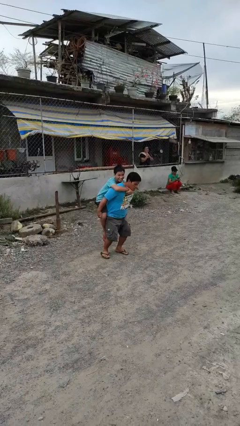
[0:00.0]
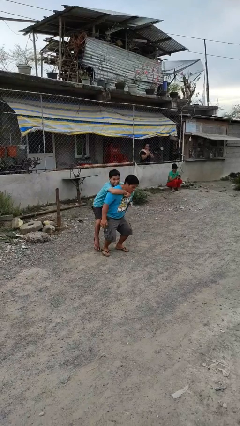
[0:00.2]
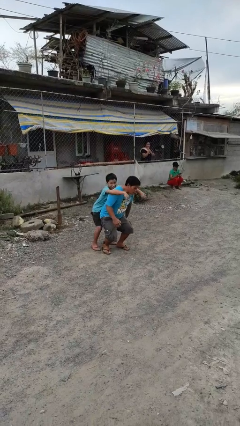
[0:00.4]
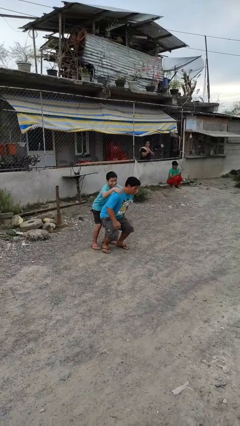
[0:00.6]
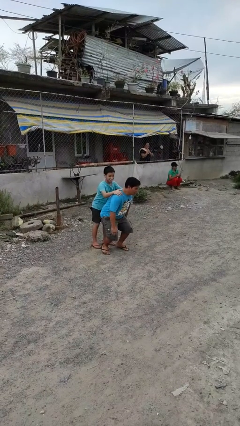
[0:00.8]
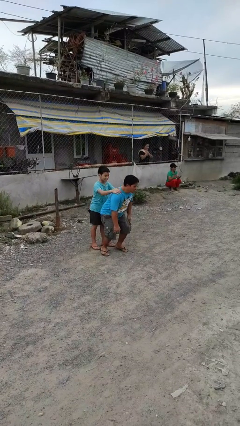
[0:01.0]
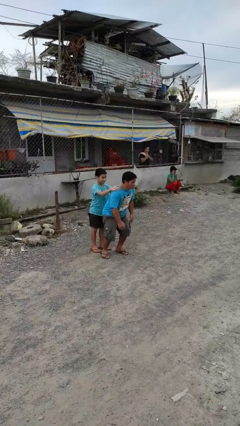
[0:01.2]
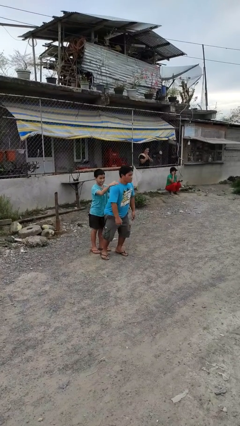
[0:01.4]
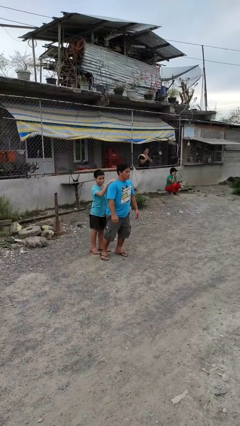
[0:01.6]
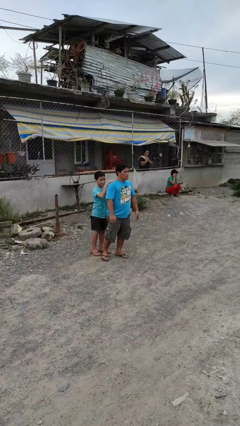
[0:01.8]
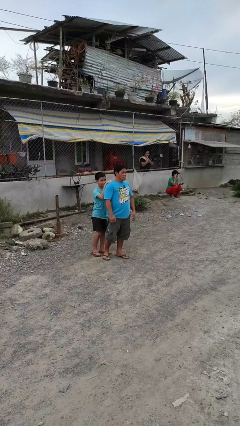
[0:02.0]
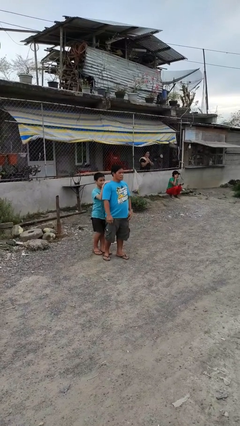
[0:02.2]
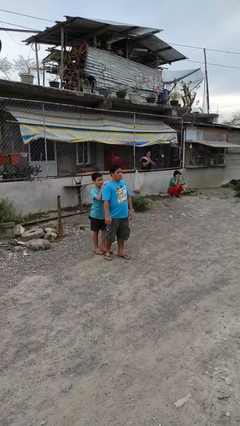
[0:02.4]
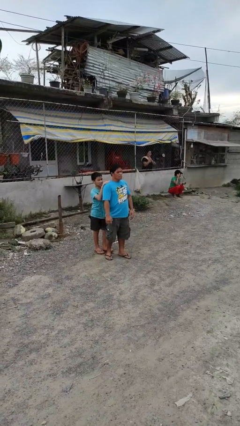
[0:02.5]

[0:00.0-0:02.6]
person puts down person

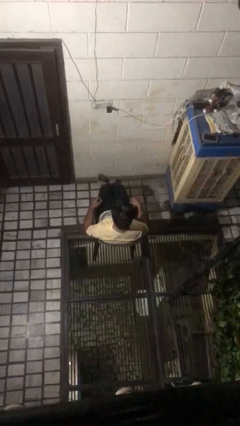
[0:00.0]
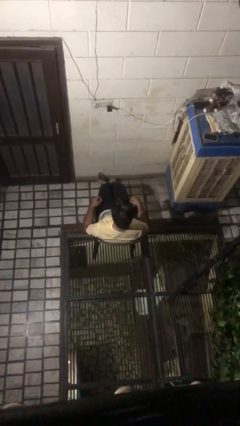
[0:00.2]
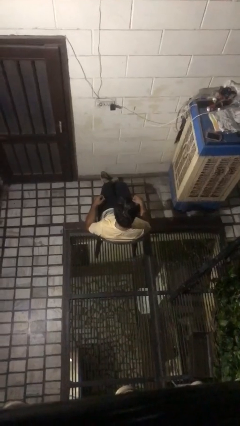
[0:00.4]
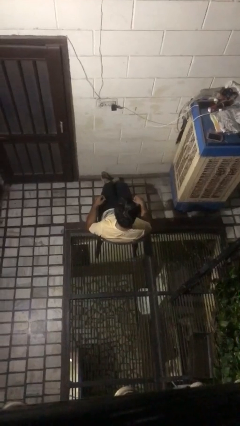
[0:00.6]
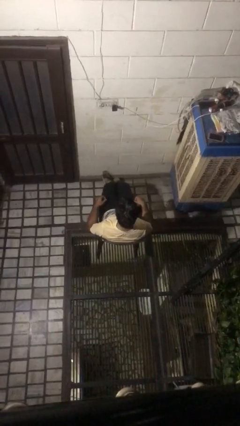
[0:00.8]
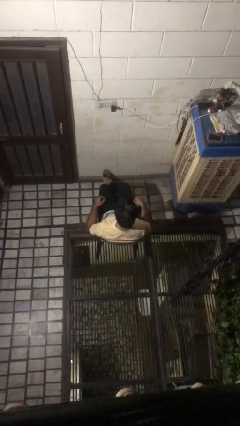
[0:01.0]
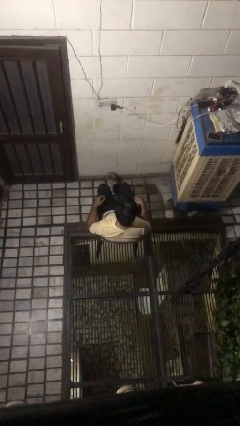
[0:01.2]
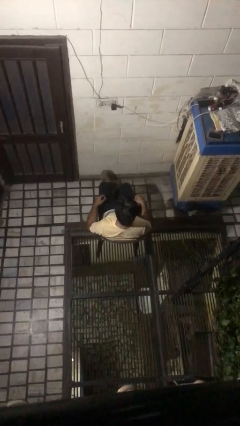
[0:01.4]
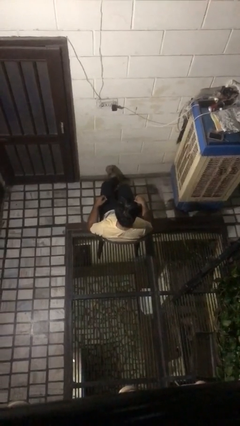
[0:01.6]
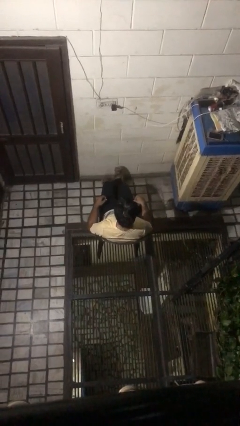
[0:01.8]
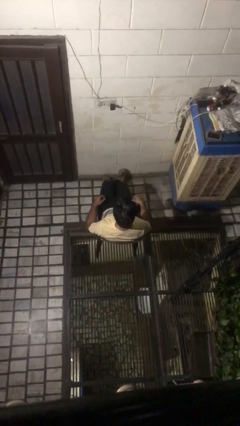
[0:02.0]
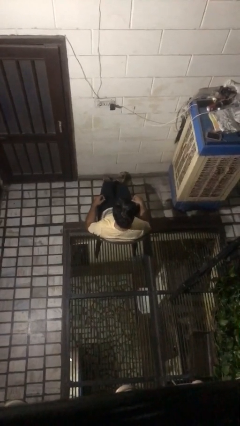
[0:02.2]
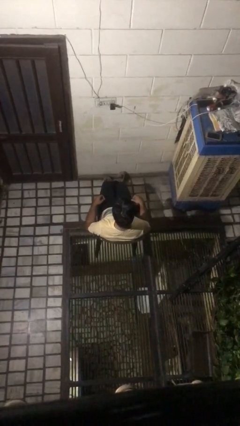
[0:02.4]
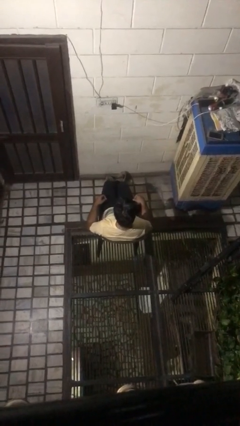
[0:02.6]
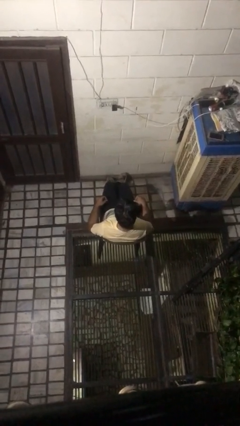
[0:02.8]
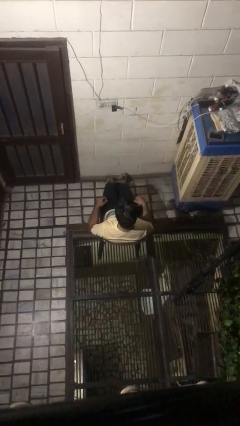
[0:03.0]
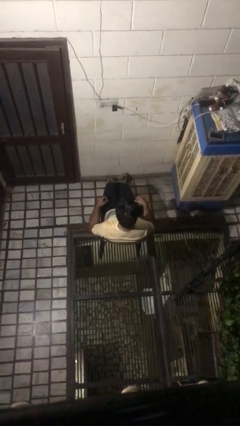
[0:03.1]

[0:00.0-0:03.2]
person crosses legs

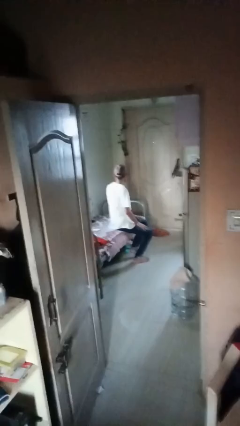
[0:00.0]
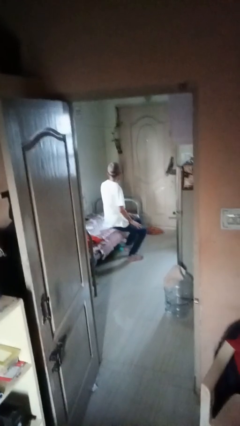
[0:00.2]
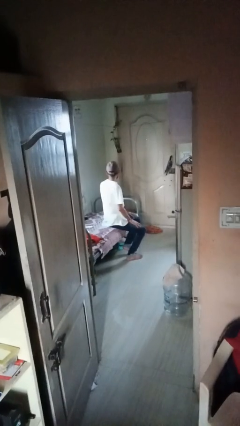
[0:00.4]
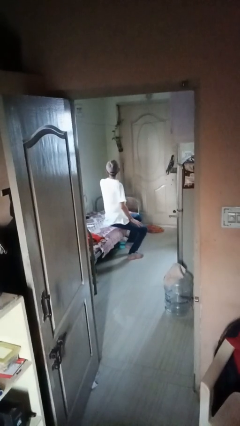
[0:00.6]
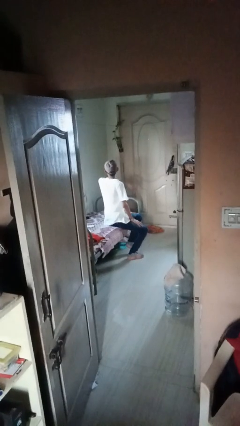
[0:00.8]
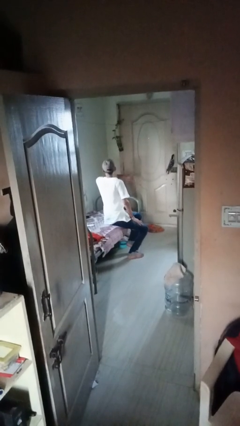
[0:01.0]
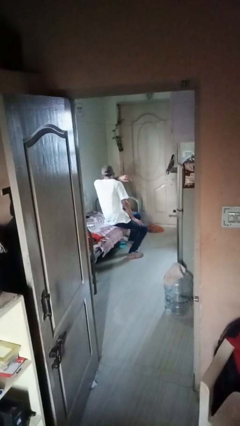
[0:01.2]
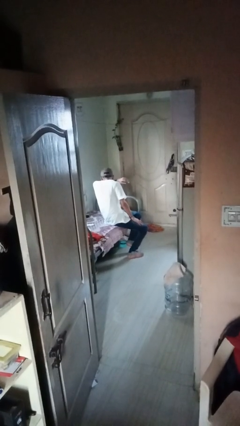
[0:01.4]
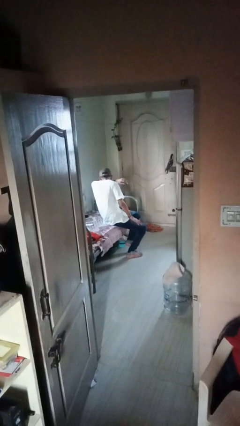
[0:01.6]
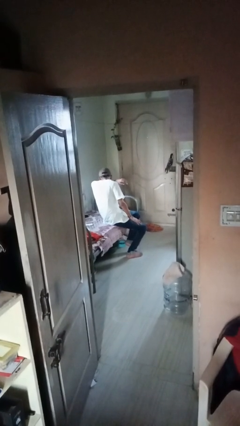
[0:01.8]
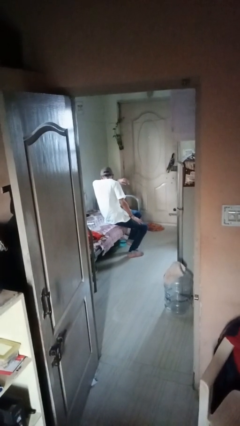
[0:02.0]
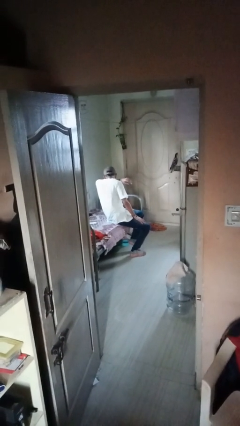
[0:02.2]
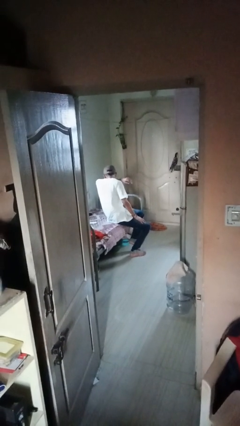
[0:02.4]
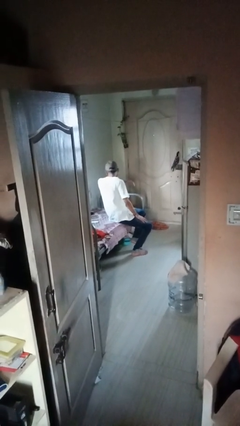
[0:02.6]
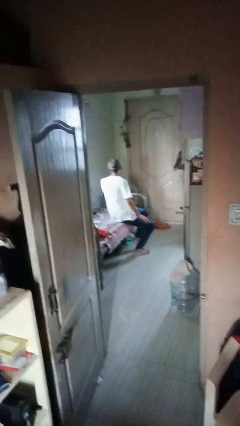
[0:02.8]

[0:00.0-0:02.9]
person sneezes into arm

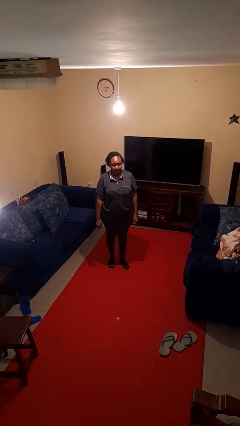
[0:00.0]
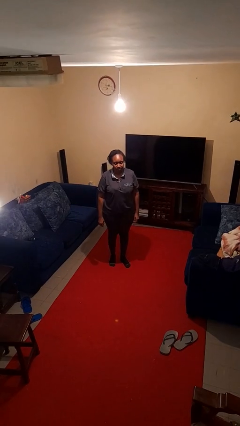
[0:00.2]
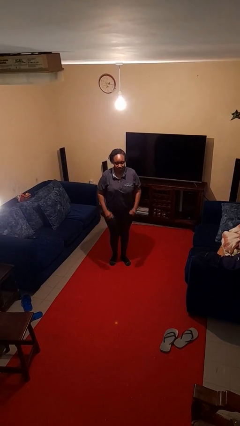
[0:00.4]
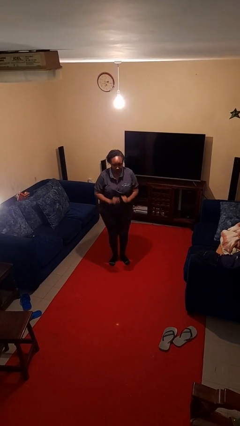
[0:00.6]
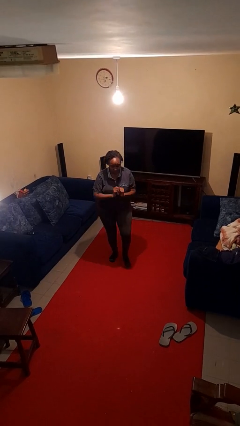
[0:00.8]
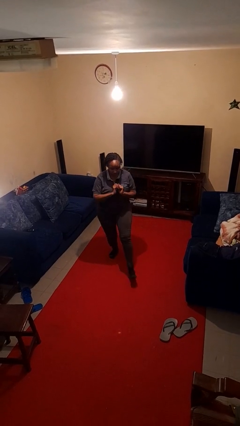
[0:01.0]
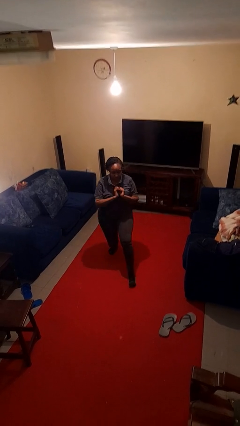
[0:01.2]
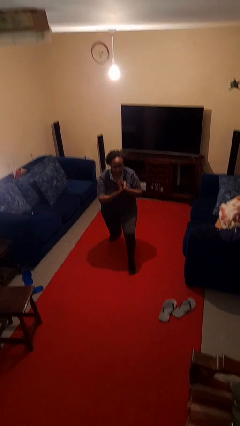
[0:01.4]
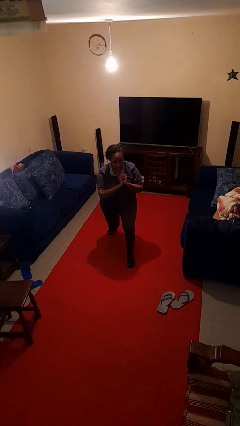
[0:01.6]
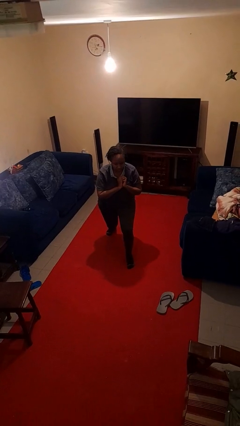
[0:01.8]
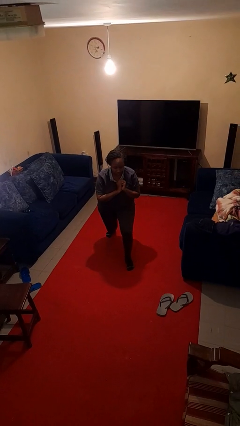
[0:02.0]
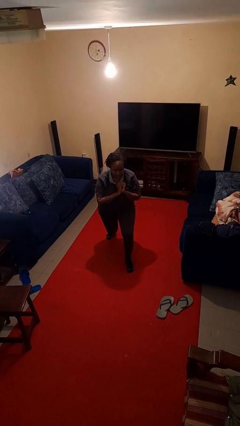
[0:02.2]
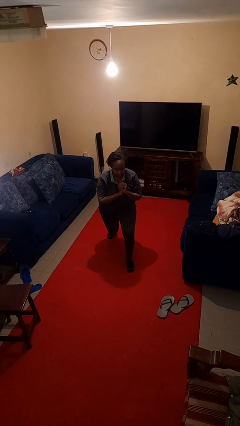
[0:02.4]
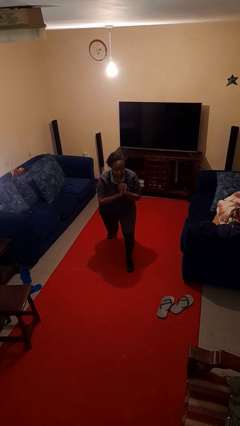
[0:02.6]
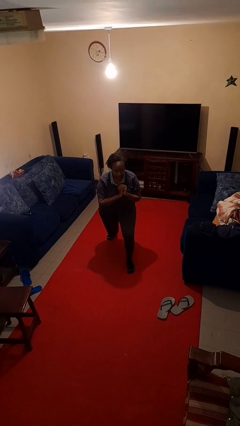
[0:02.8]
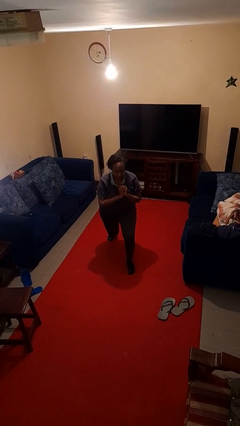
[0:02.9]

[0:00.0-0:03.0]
person exercises with lunges

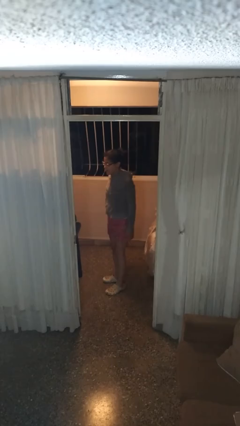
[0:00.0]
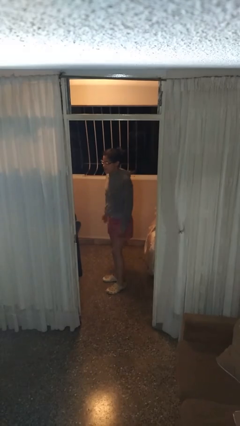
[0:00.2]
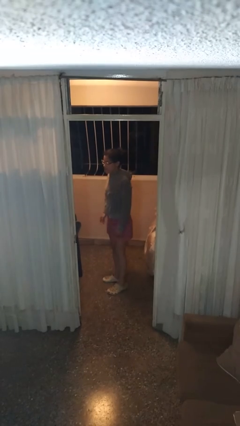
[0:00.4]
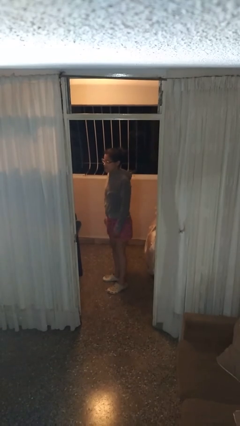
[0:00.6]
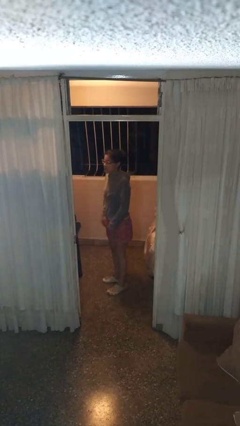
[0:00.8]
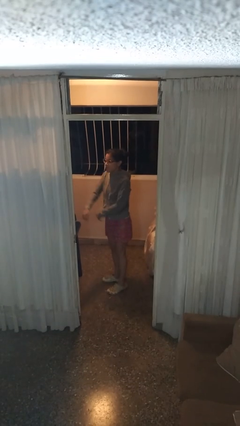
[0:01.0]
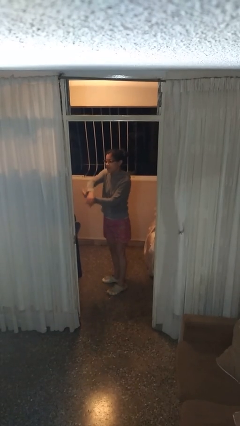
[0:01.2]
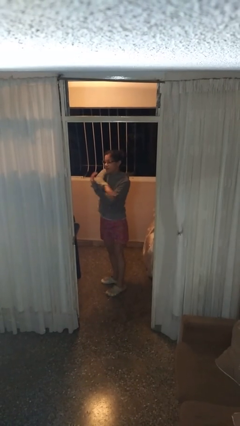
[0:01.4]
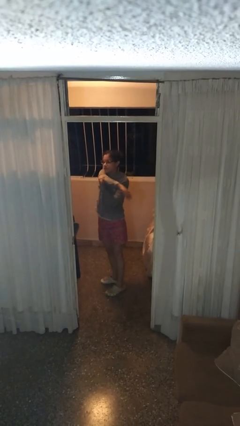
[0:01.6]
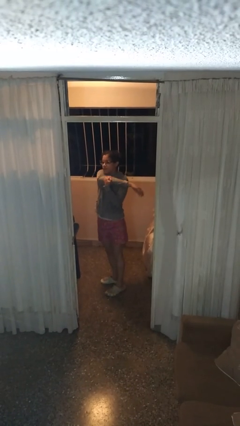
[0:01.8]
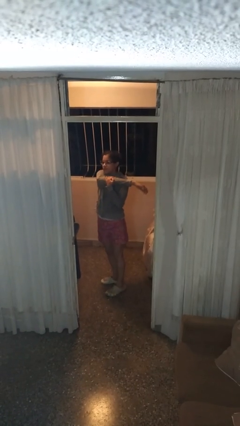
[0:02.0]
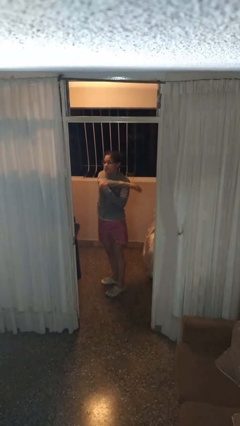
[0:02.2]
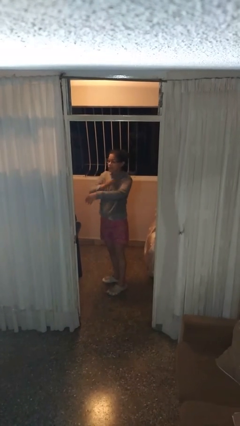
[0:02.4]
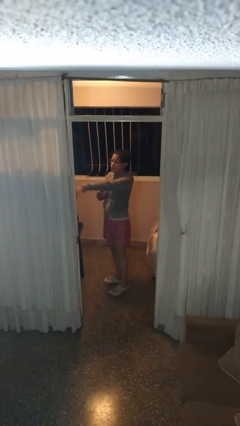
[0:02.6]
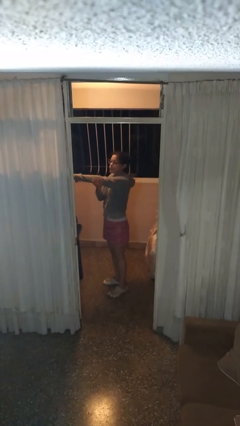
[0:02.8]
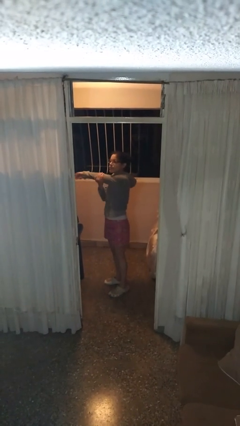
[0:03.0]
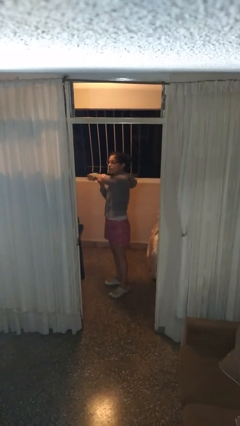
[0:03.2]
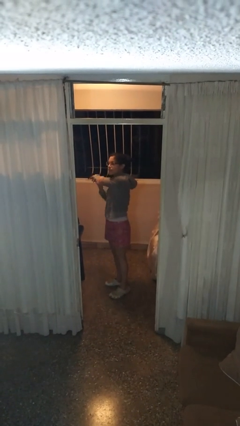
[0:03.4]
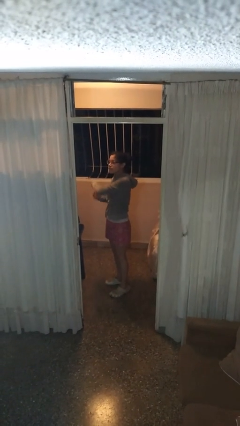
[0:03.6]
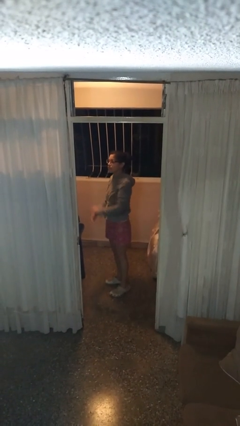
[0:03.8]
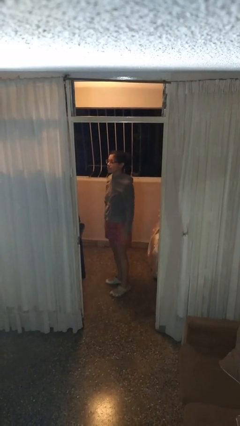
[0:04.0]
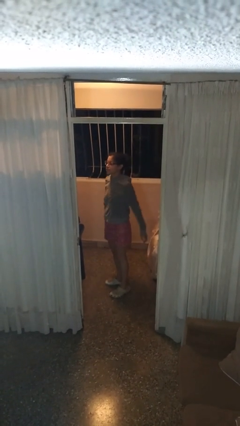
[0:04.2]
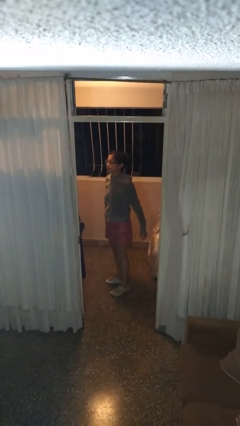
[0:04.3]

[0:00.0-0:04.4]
person stretches arms to side

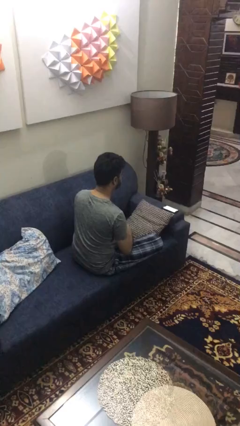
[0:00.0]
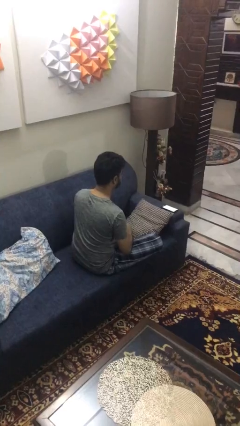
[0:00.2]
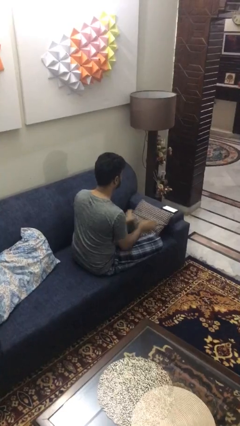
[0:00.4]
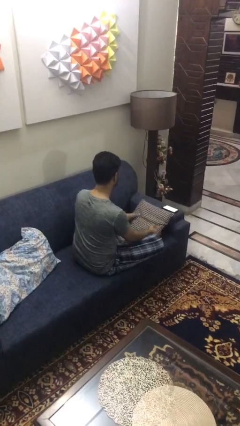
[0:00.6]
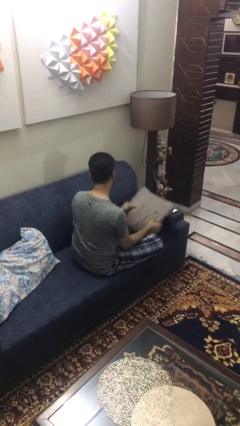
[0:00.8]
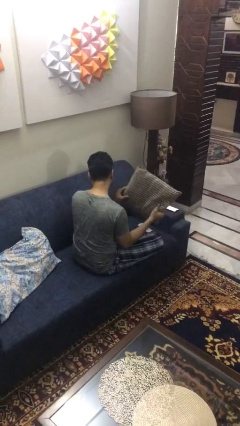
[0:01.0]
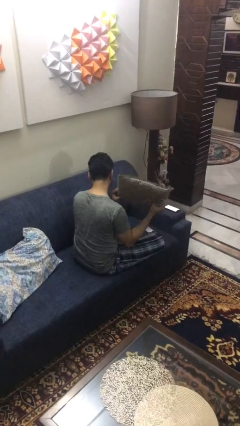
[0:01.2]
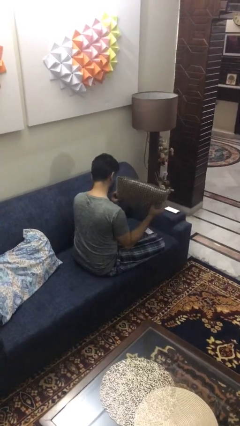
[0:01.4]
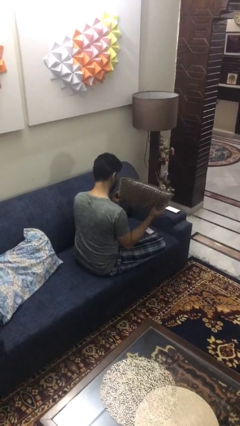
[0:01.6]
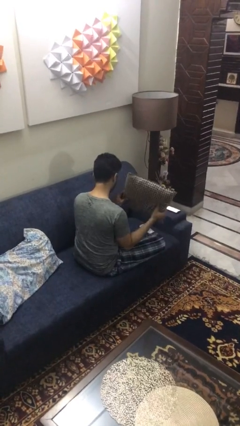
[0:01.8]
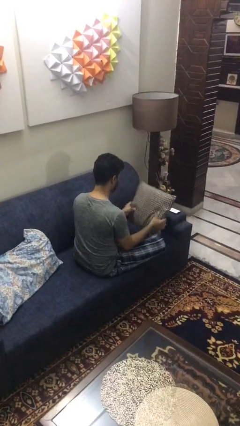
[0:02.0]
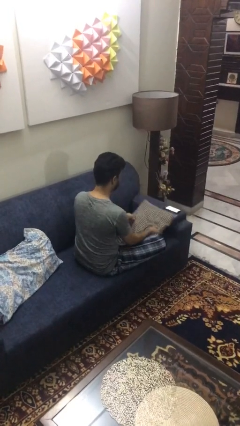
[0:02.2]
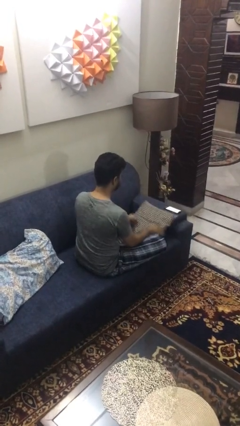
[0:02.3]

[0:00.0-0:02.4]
person searches in couch
